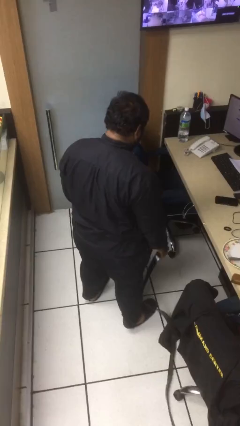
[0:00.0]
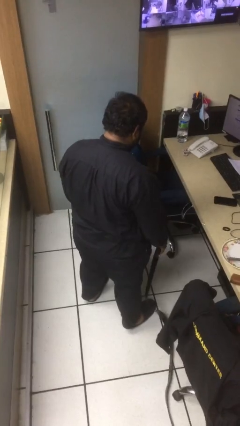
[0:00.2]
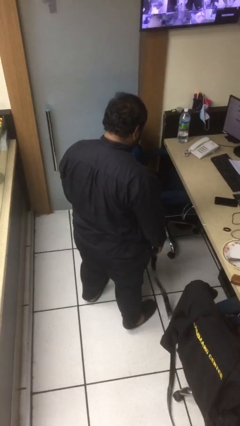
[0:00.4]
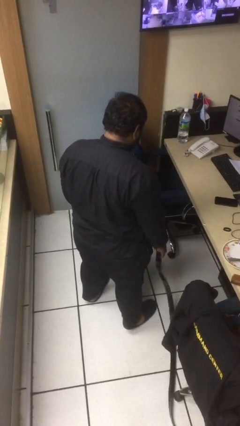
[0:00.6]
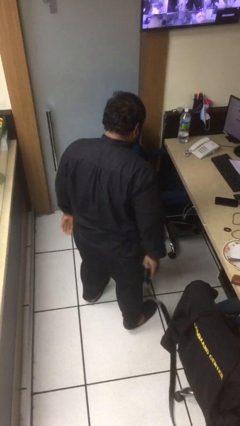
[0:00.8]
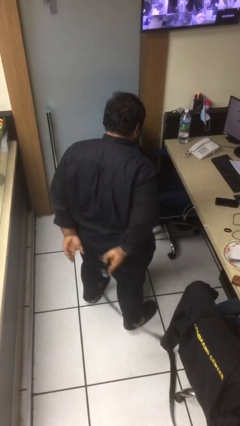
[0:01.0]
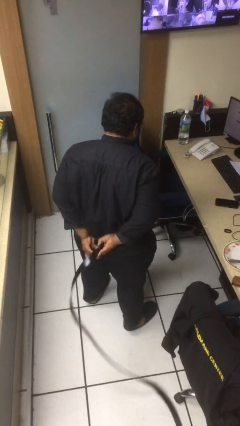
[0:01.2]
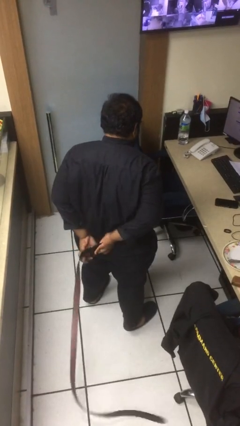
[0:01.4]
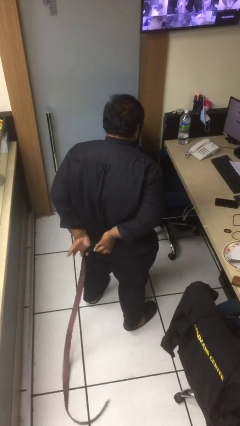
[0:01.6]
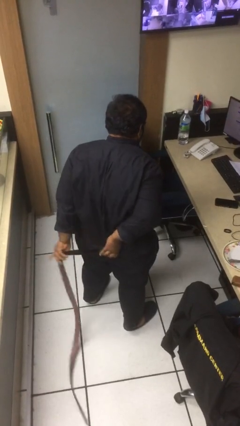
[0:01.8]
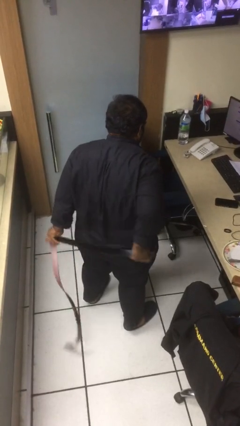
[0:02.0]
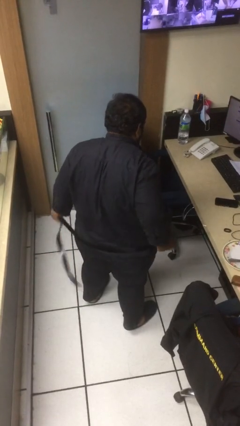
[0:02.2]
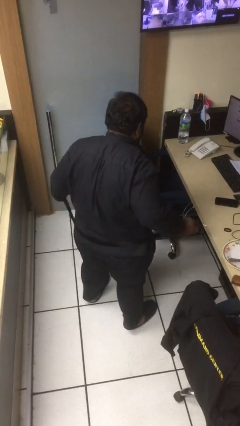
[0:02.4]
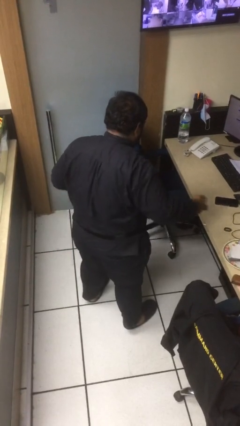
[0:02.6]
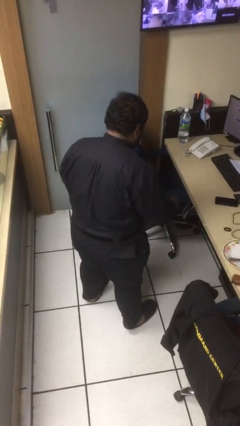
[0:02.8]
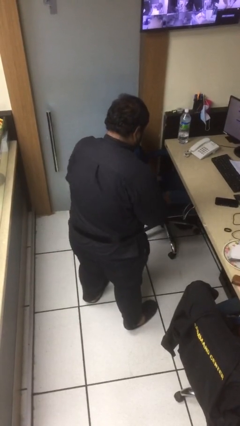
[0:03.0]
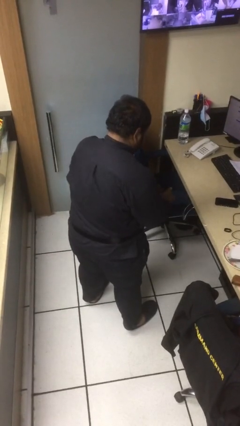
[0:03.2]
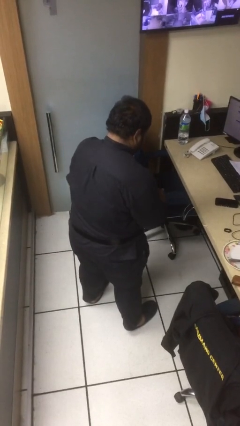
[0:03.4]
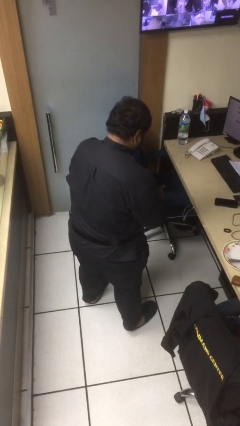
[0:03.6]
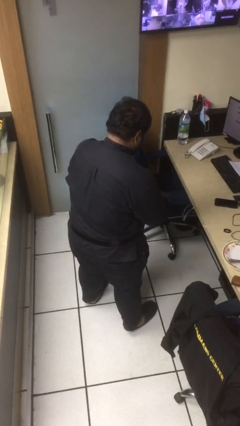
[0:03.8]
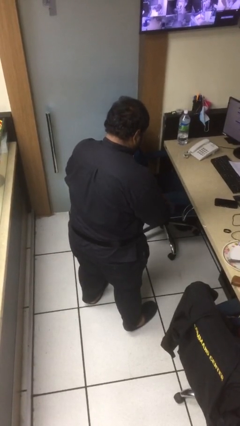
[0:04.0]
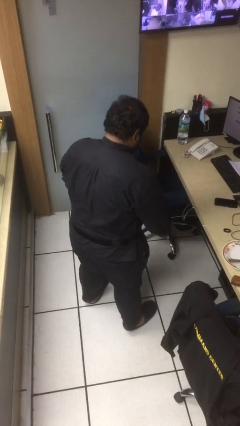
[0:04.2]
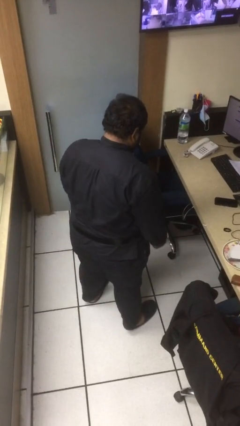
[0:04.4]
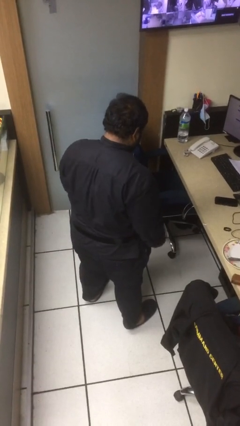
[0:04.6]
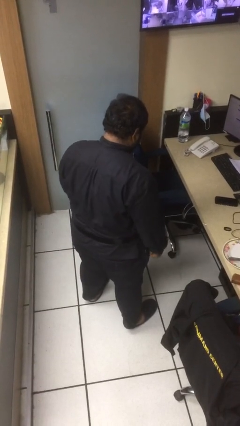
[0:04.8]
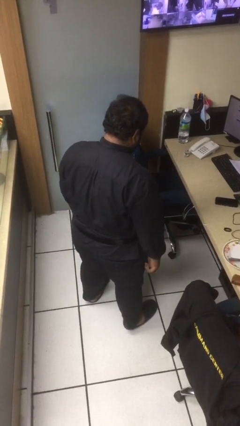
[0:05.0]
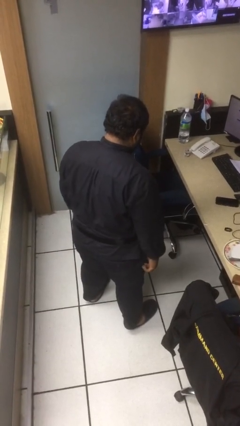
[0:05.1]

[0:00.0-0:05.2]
person puts on belt

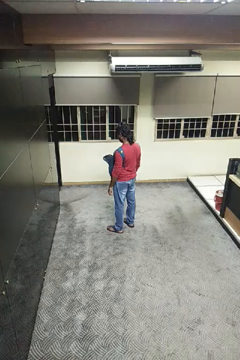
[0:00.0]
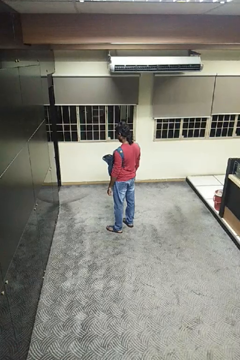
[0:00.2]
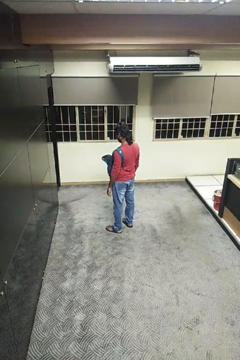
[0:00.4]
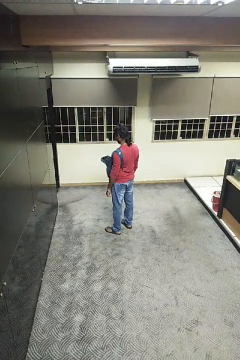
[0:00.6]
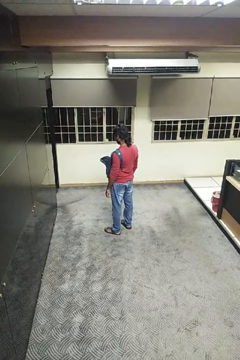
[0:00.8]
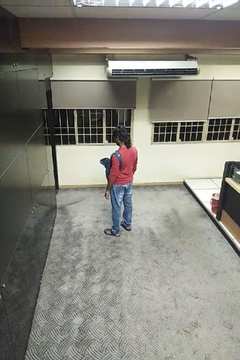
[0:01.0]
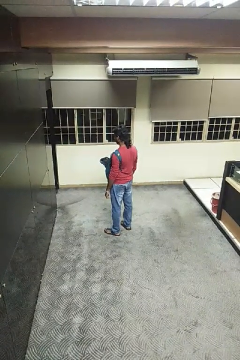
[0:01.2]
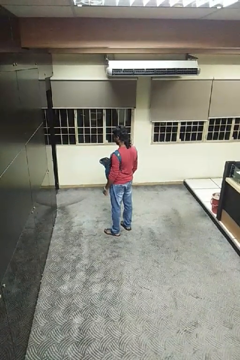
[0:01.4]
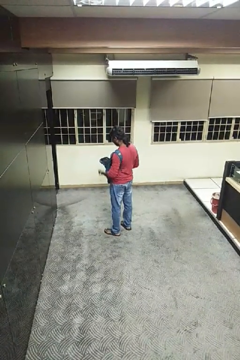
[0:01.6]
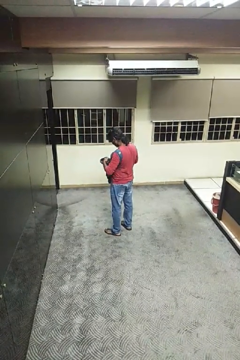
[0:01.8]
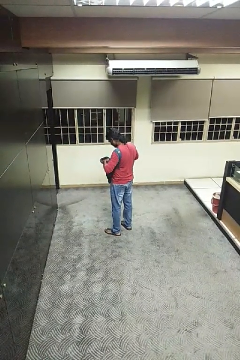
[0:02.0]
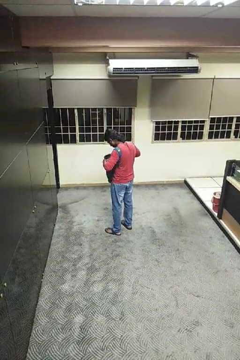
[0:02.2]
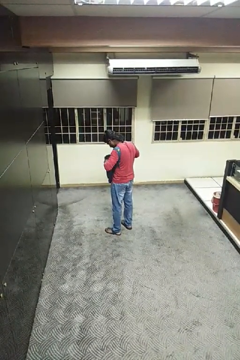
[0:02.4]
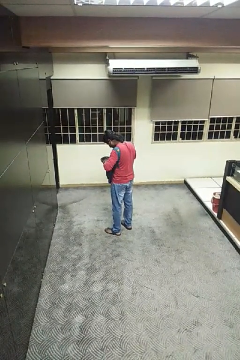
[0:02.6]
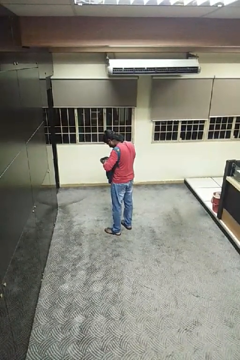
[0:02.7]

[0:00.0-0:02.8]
person searches in backpack

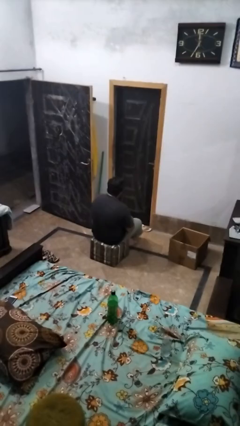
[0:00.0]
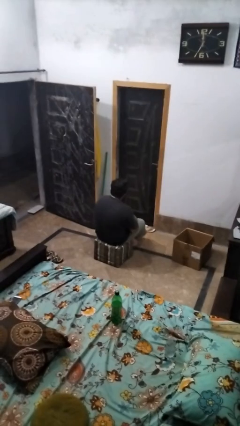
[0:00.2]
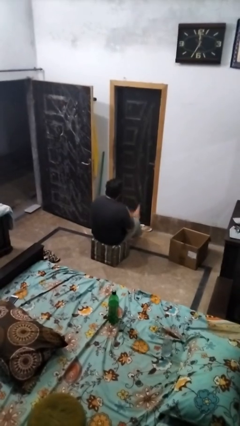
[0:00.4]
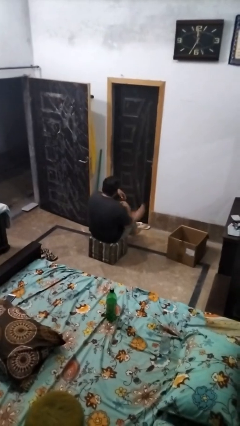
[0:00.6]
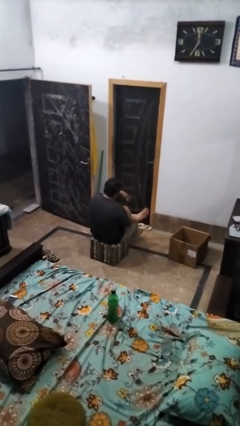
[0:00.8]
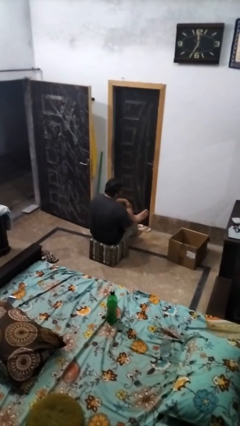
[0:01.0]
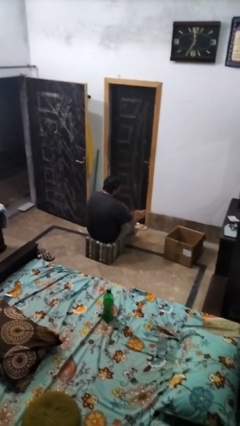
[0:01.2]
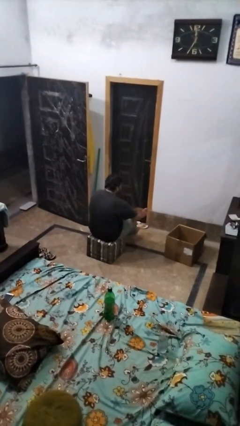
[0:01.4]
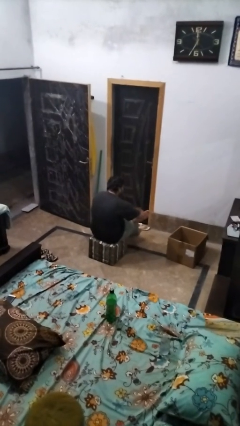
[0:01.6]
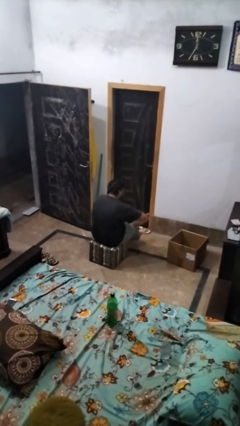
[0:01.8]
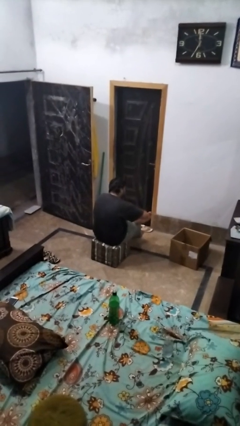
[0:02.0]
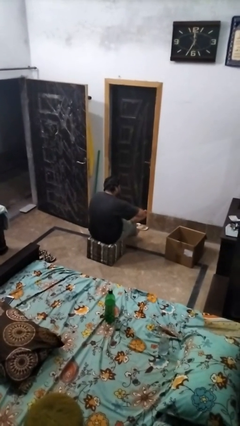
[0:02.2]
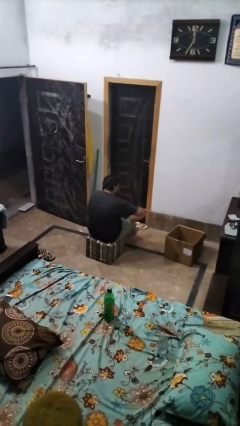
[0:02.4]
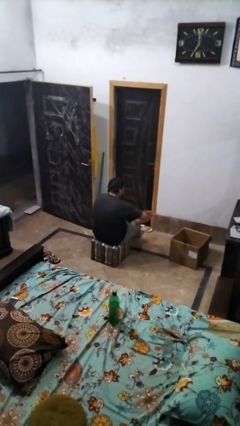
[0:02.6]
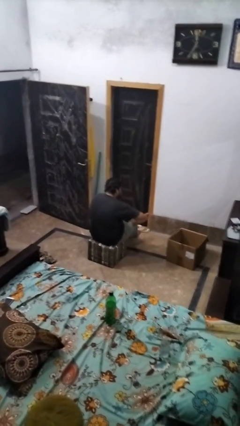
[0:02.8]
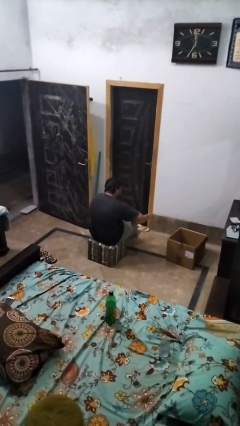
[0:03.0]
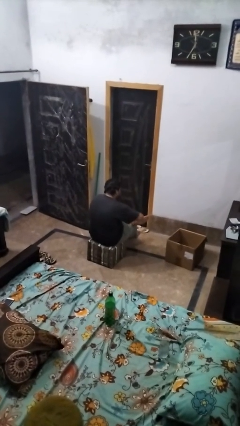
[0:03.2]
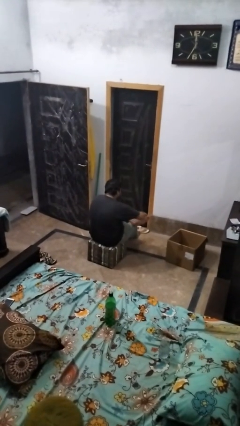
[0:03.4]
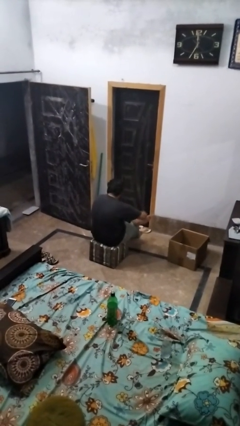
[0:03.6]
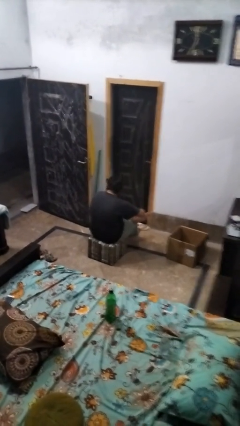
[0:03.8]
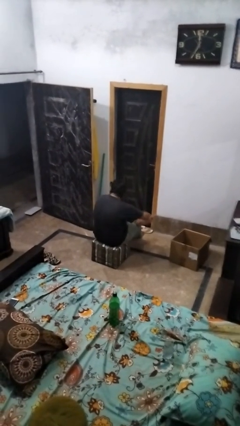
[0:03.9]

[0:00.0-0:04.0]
person rubs foot

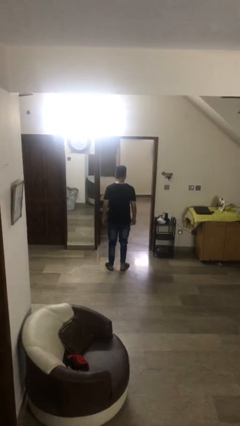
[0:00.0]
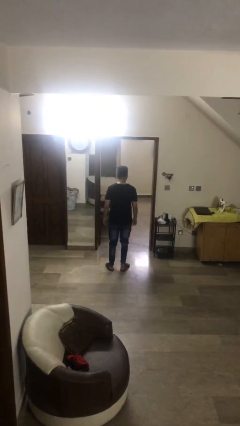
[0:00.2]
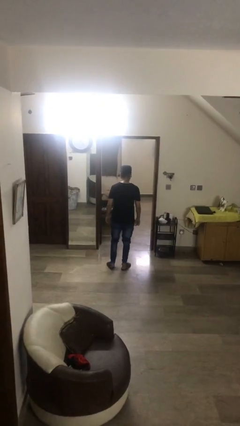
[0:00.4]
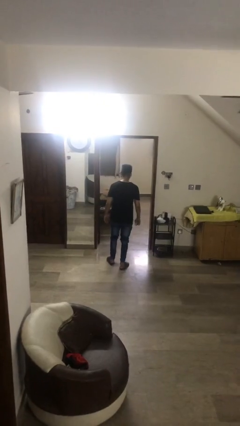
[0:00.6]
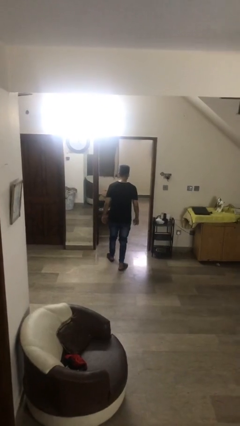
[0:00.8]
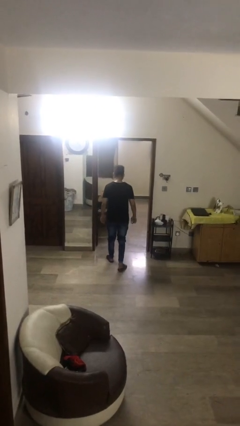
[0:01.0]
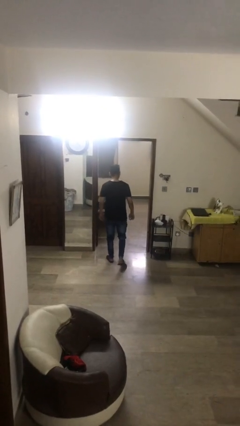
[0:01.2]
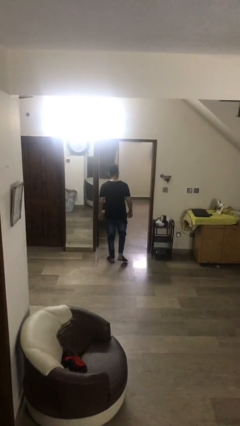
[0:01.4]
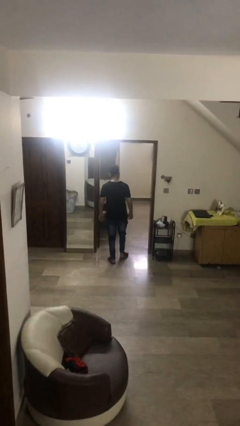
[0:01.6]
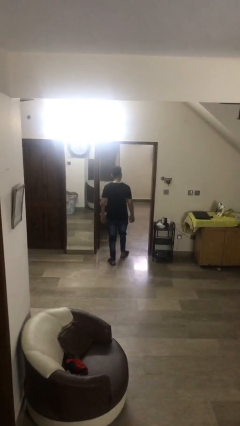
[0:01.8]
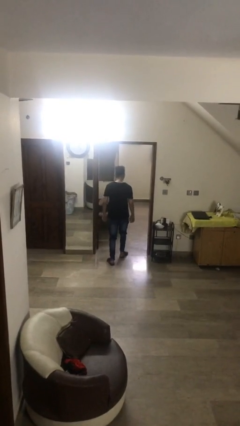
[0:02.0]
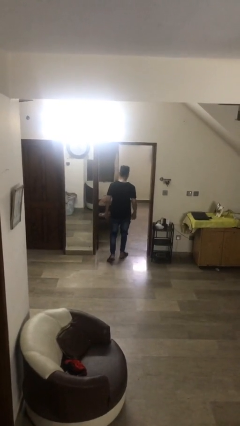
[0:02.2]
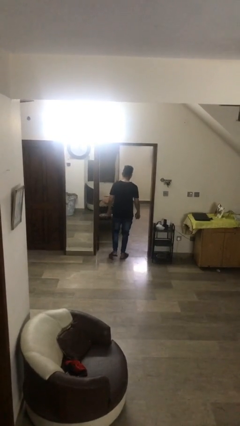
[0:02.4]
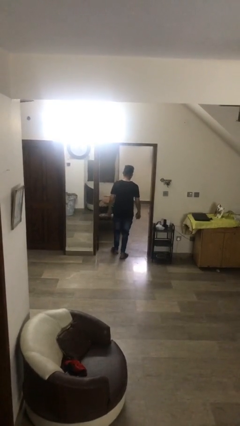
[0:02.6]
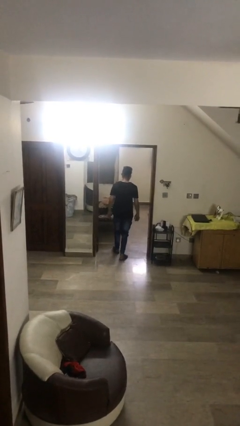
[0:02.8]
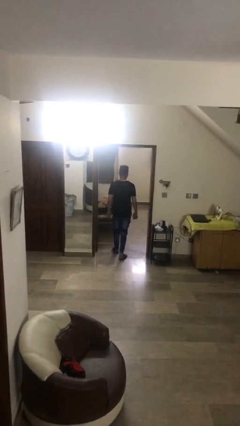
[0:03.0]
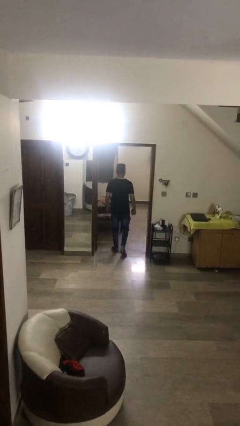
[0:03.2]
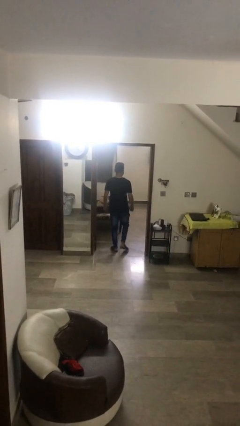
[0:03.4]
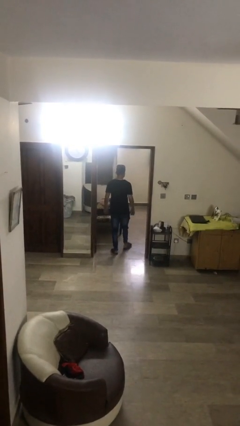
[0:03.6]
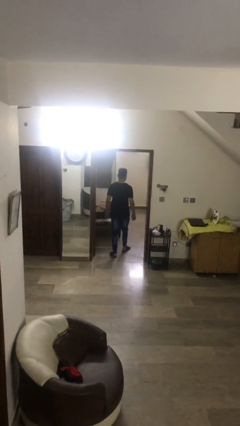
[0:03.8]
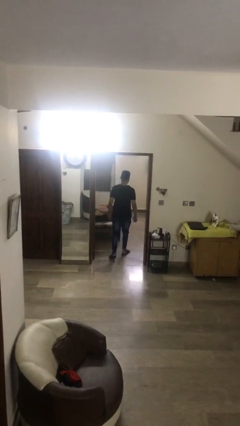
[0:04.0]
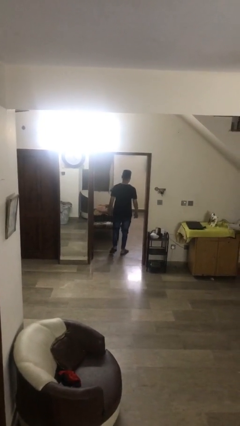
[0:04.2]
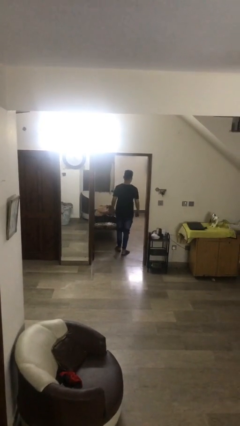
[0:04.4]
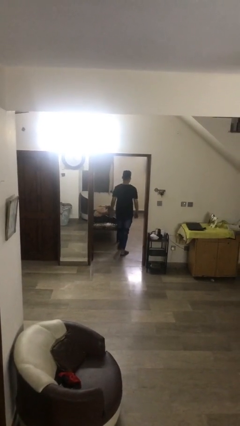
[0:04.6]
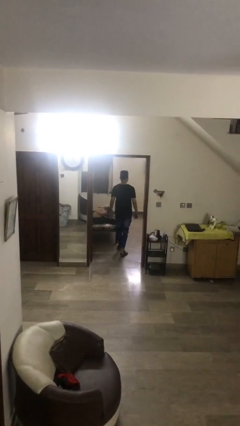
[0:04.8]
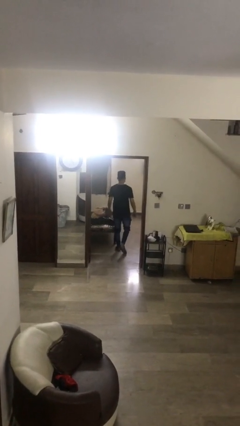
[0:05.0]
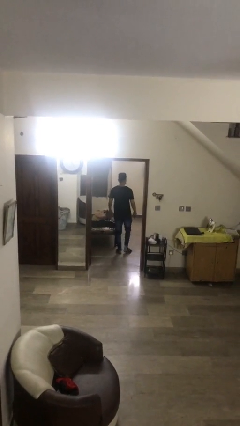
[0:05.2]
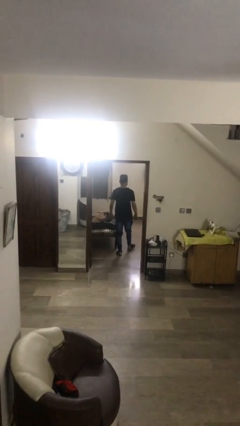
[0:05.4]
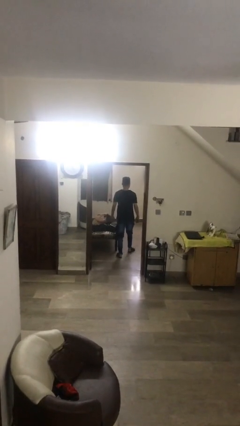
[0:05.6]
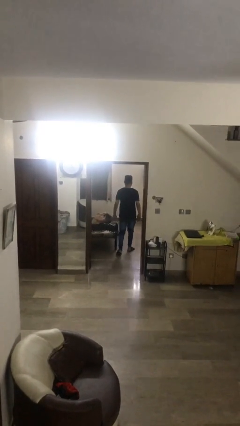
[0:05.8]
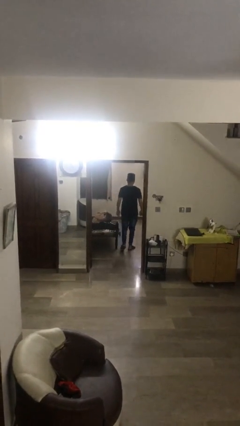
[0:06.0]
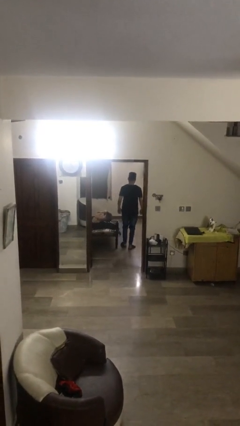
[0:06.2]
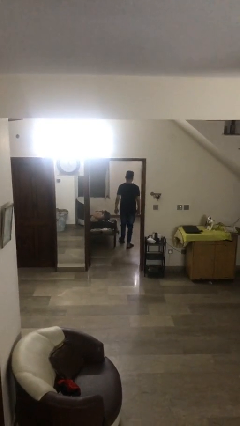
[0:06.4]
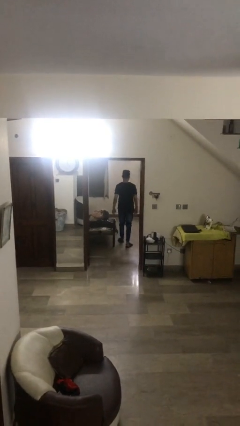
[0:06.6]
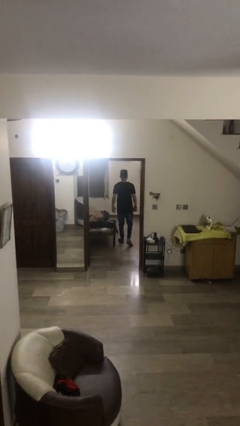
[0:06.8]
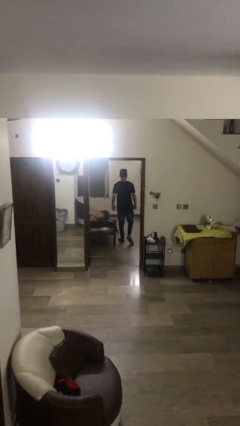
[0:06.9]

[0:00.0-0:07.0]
person exits scene through structure
